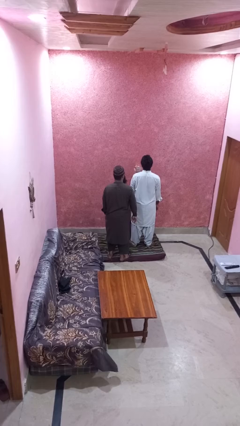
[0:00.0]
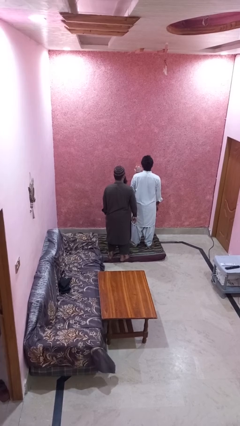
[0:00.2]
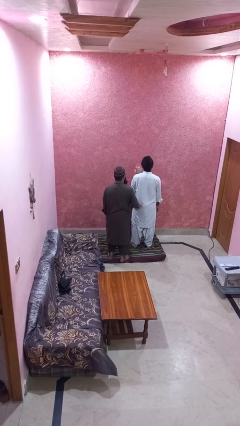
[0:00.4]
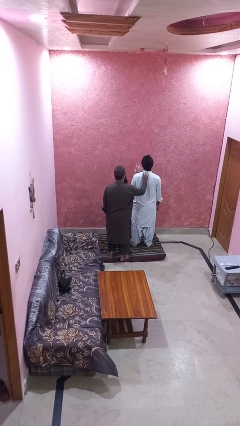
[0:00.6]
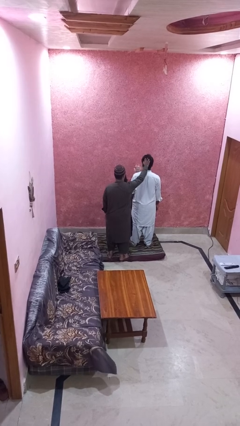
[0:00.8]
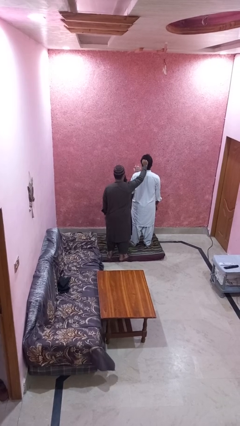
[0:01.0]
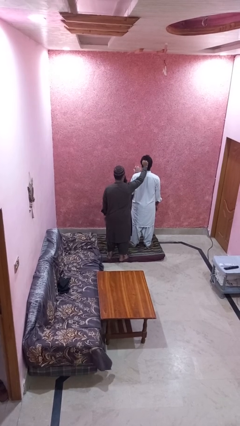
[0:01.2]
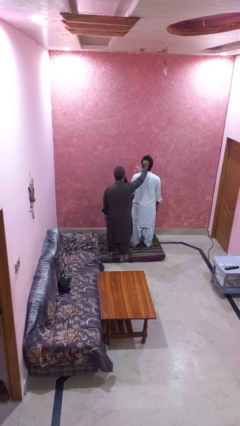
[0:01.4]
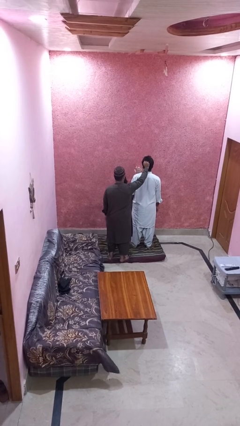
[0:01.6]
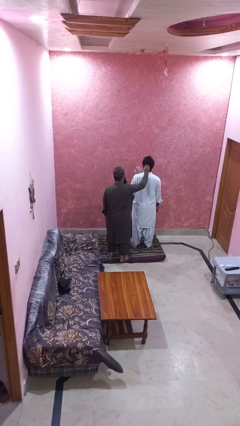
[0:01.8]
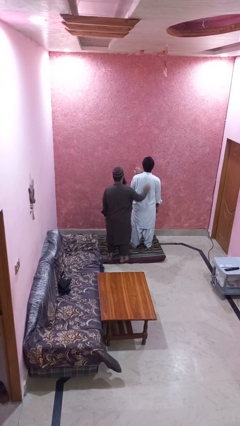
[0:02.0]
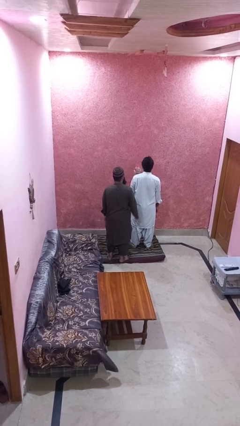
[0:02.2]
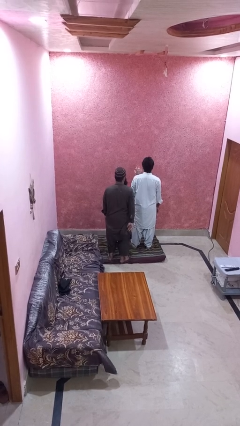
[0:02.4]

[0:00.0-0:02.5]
person grabs person by hair

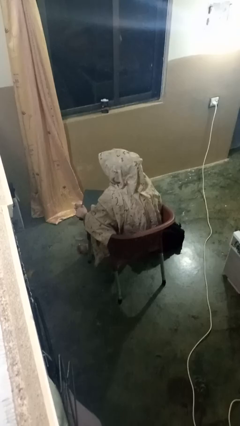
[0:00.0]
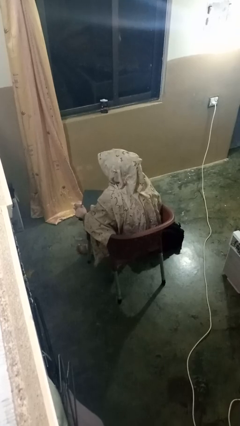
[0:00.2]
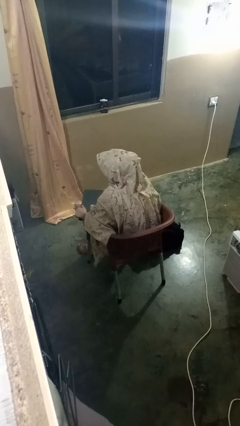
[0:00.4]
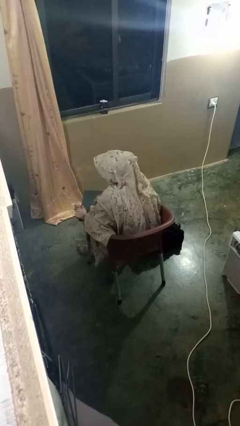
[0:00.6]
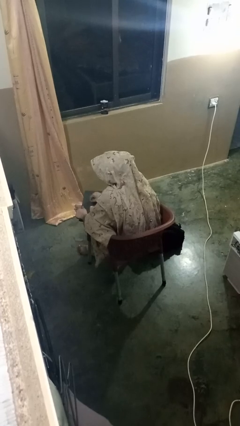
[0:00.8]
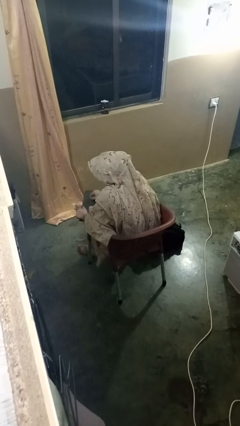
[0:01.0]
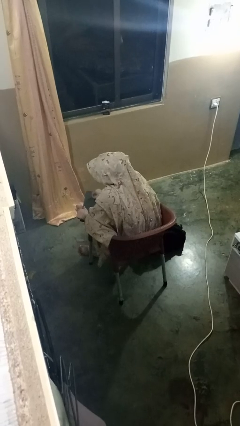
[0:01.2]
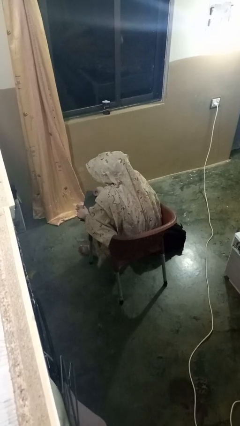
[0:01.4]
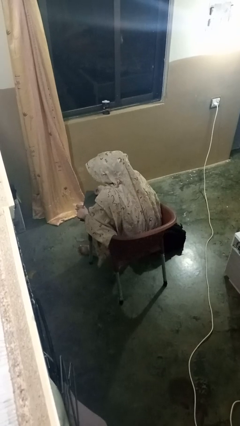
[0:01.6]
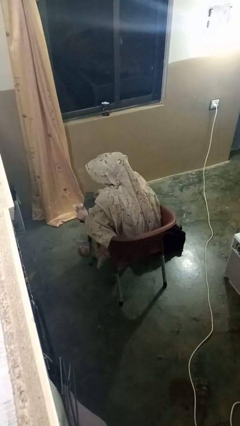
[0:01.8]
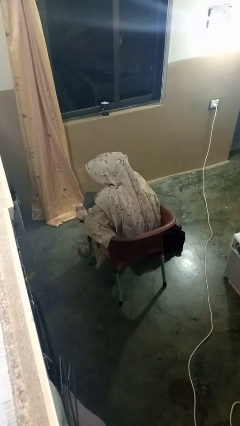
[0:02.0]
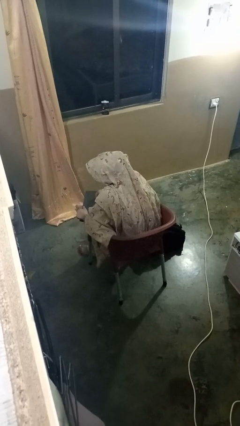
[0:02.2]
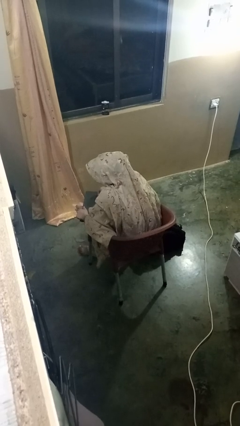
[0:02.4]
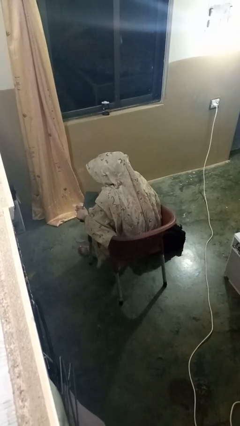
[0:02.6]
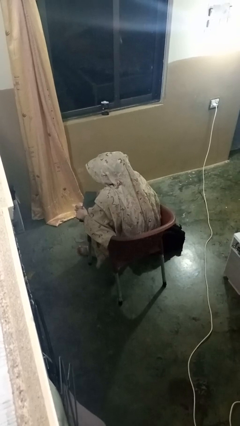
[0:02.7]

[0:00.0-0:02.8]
person interacts with tablet

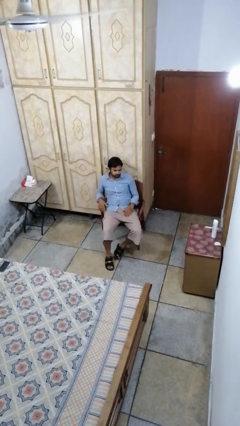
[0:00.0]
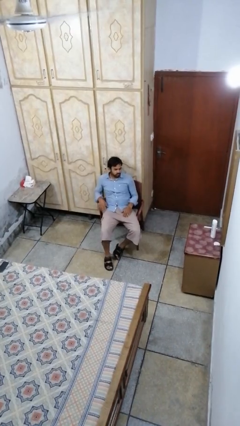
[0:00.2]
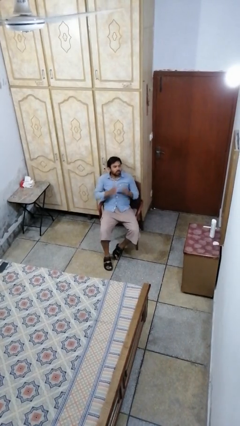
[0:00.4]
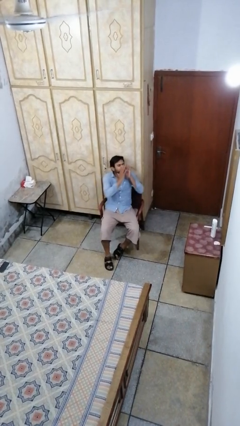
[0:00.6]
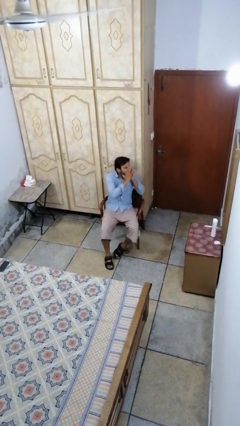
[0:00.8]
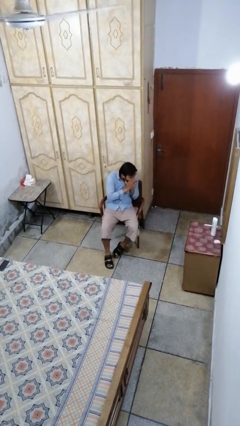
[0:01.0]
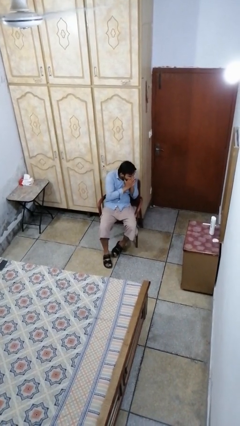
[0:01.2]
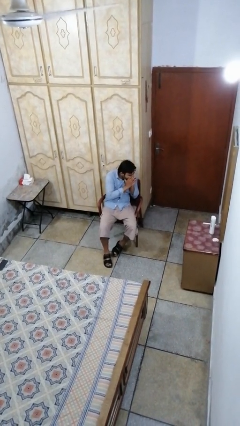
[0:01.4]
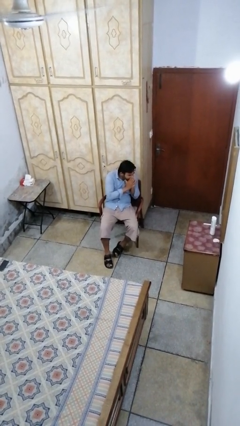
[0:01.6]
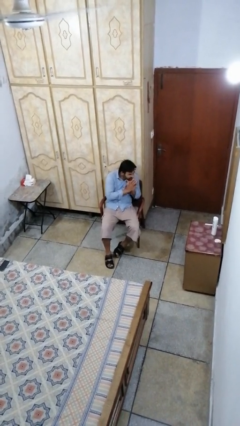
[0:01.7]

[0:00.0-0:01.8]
person sneezes into hand

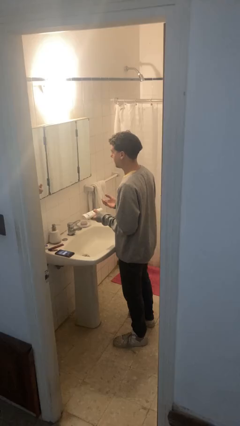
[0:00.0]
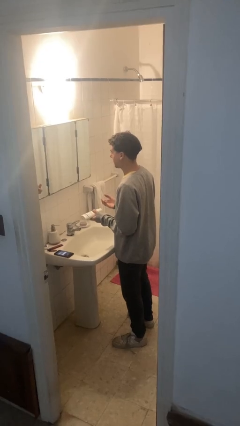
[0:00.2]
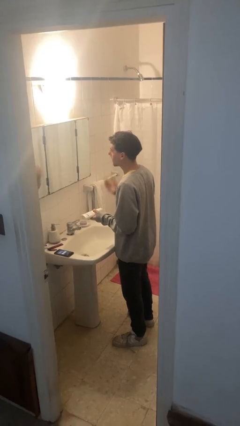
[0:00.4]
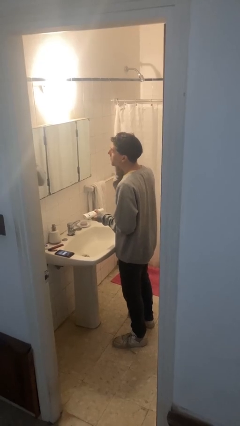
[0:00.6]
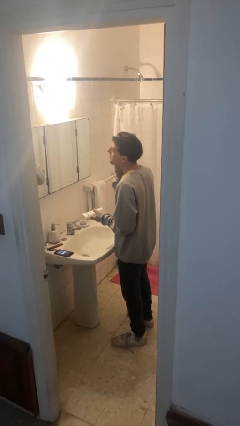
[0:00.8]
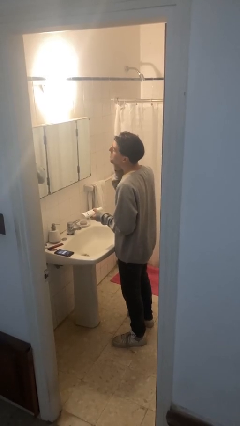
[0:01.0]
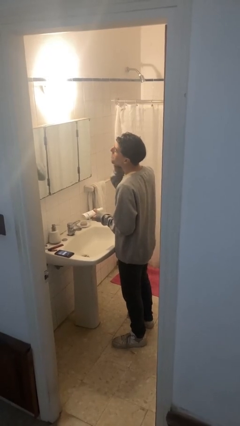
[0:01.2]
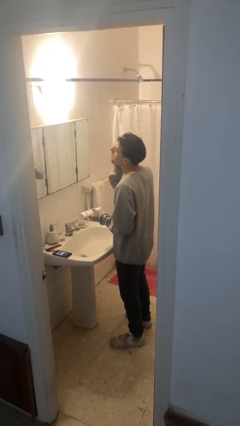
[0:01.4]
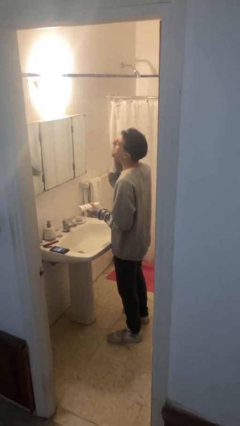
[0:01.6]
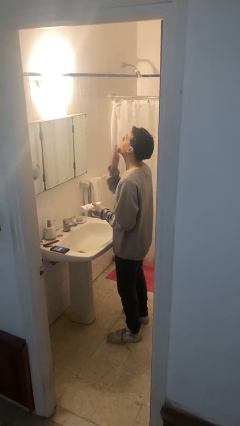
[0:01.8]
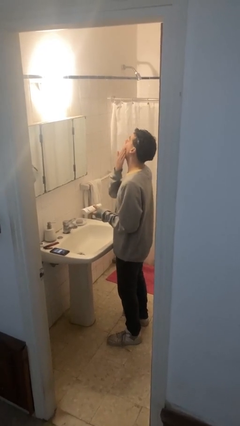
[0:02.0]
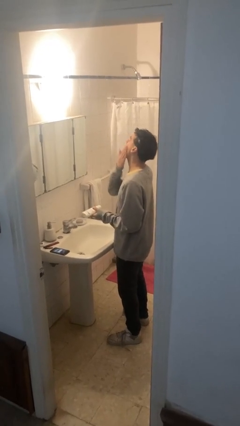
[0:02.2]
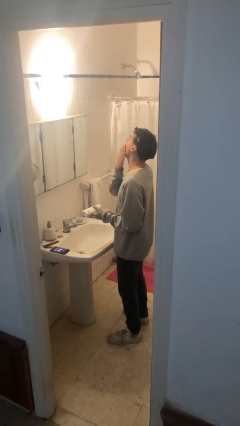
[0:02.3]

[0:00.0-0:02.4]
person applies foundation makeup

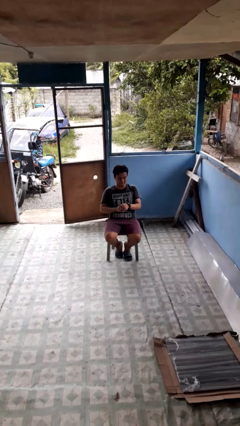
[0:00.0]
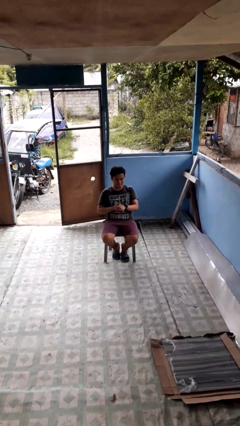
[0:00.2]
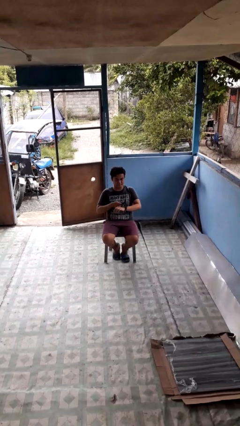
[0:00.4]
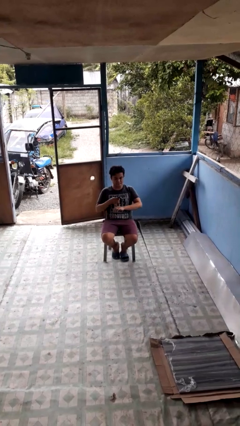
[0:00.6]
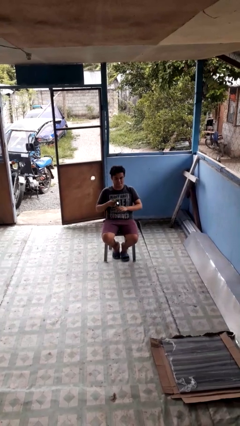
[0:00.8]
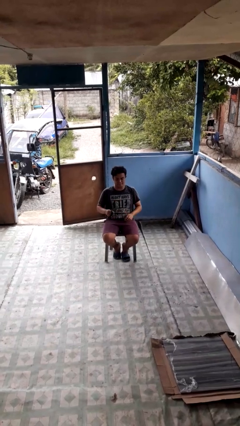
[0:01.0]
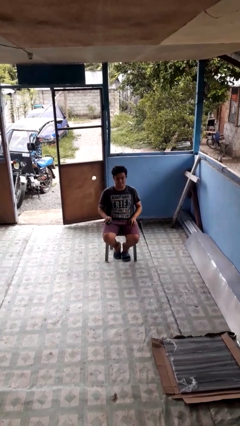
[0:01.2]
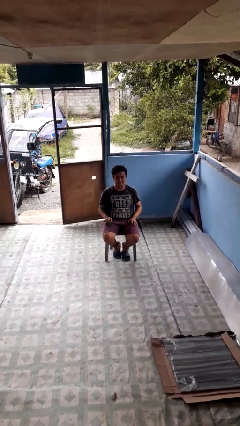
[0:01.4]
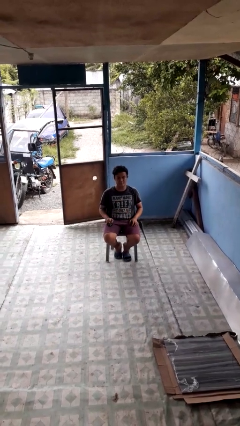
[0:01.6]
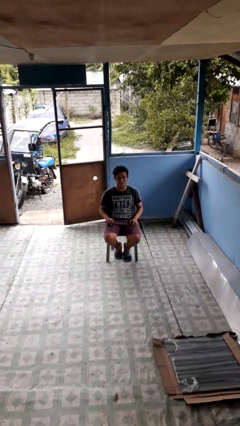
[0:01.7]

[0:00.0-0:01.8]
person takes off wristwatch

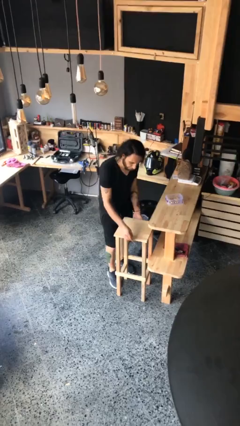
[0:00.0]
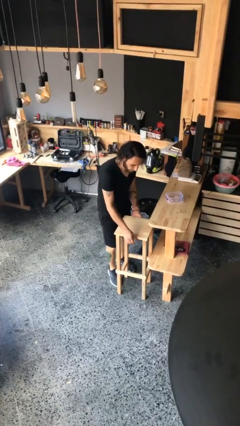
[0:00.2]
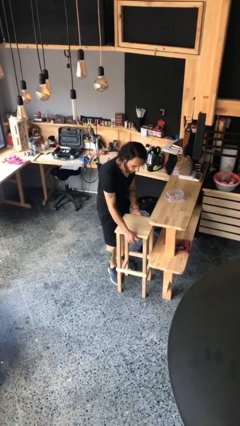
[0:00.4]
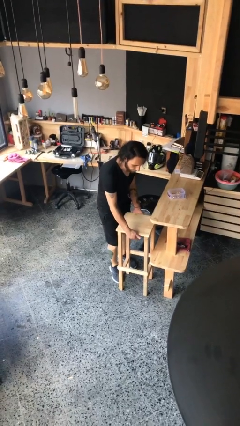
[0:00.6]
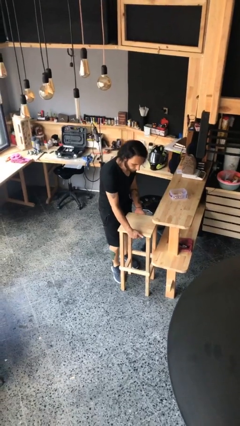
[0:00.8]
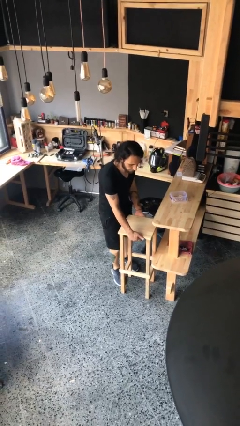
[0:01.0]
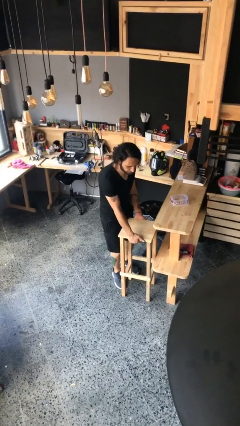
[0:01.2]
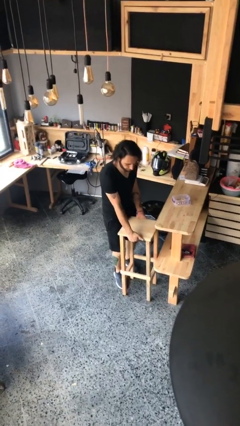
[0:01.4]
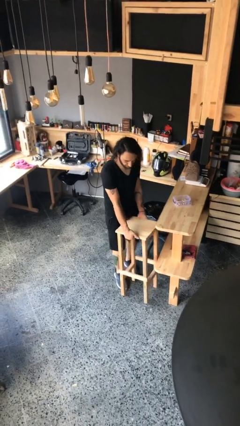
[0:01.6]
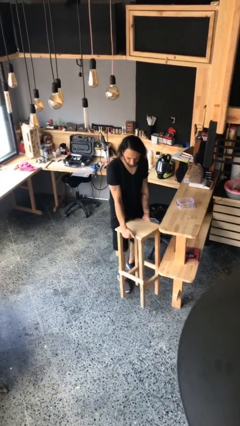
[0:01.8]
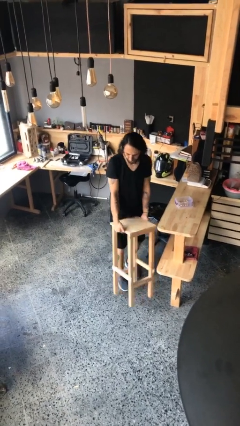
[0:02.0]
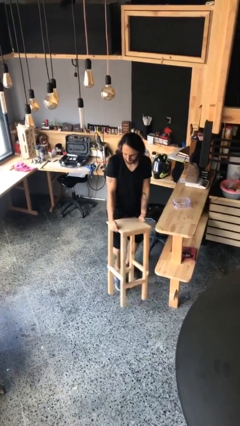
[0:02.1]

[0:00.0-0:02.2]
person picks up object from floor

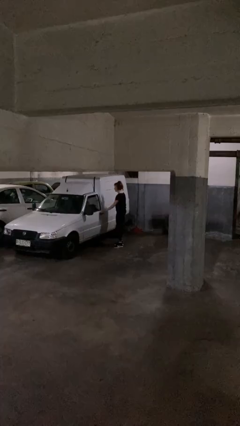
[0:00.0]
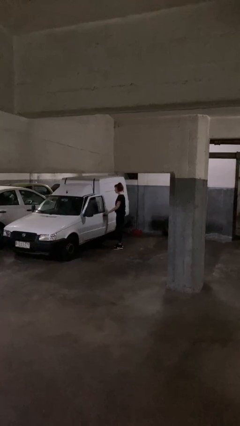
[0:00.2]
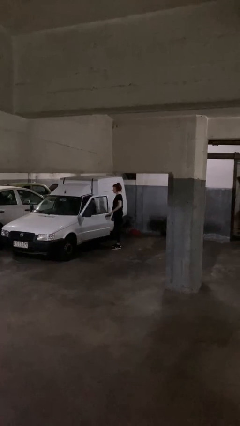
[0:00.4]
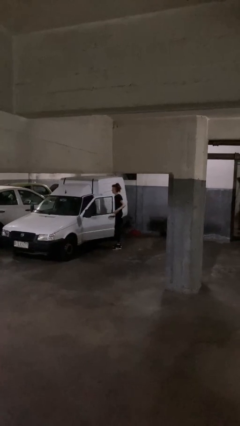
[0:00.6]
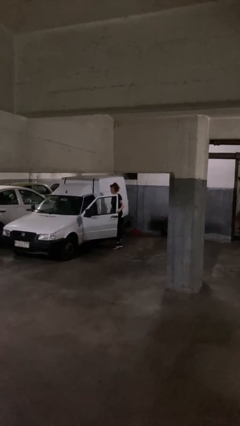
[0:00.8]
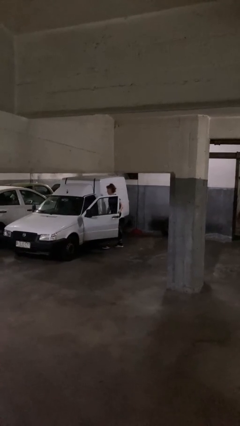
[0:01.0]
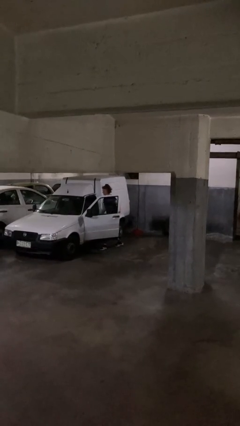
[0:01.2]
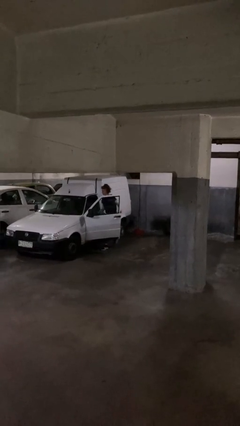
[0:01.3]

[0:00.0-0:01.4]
person opens car door

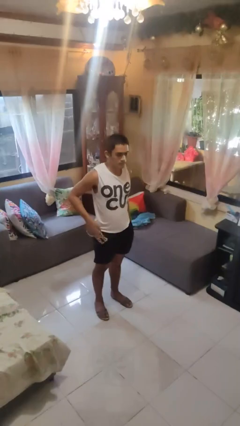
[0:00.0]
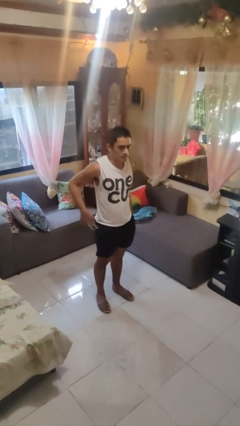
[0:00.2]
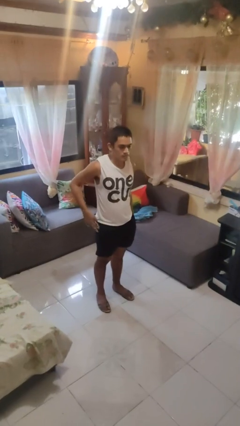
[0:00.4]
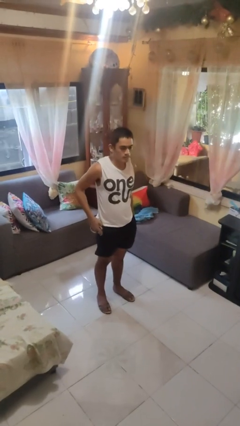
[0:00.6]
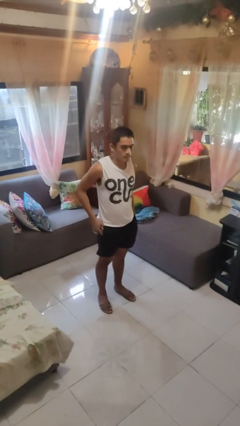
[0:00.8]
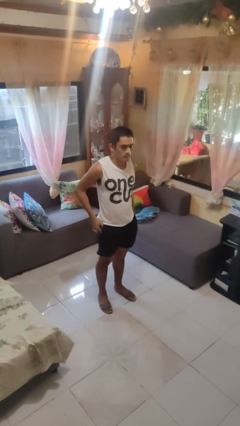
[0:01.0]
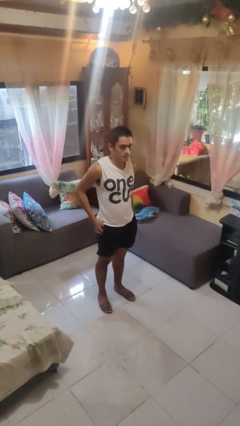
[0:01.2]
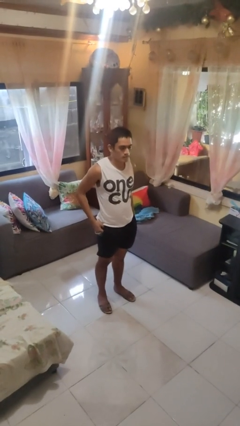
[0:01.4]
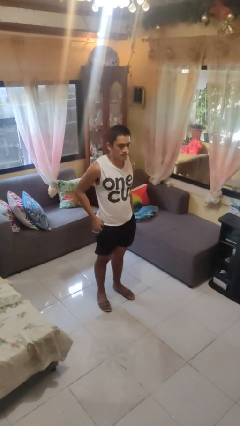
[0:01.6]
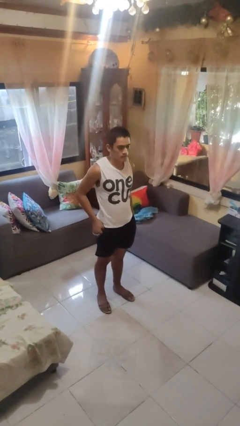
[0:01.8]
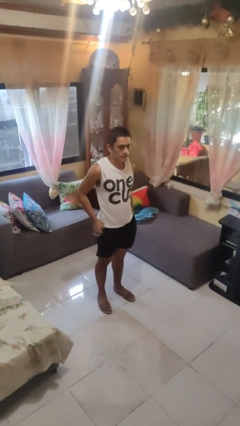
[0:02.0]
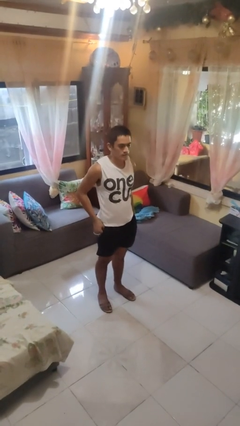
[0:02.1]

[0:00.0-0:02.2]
person puts phone into pocket
